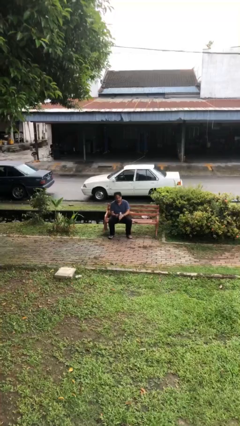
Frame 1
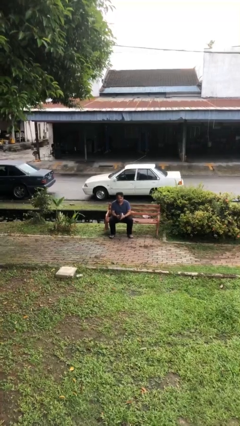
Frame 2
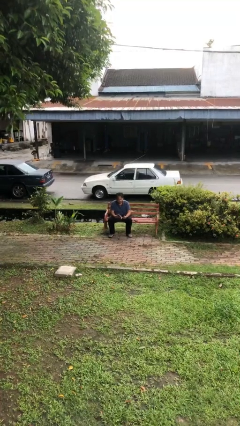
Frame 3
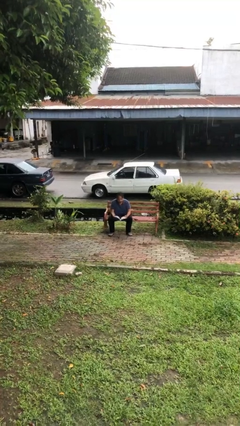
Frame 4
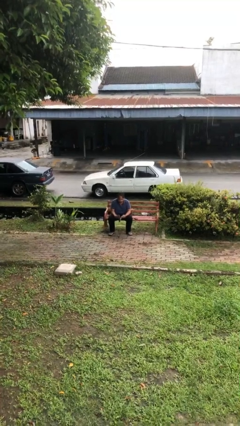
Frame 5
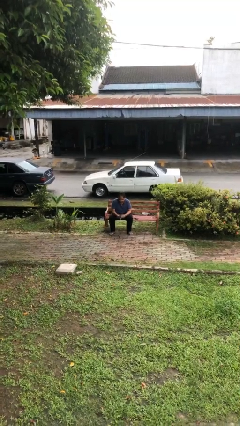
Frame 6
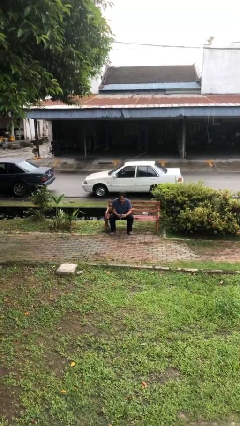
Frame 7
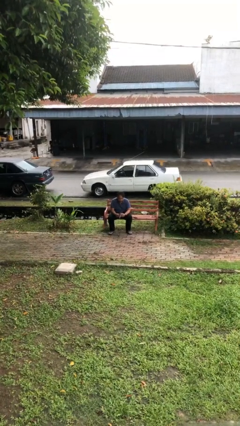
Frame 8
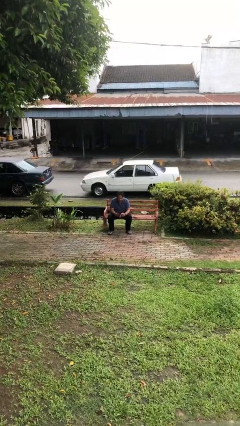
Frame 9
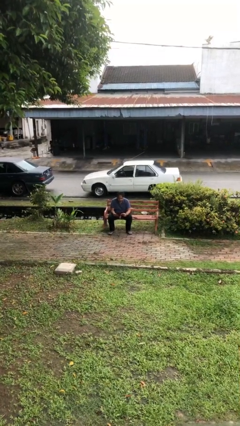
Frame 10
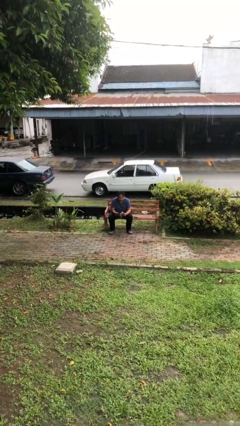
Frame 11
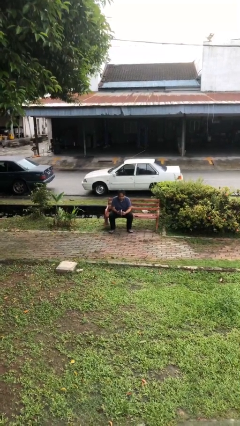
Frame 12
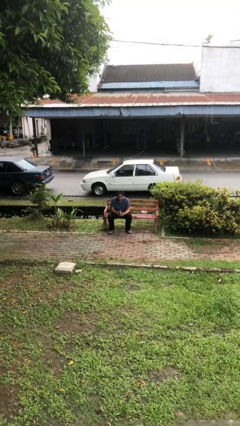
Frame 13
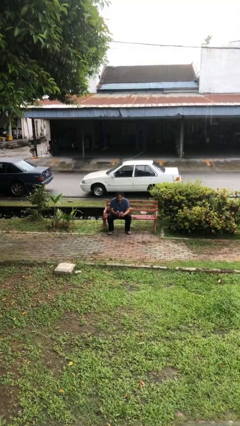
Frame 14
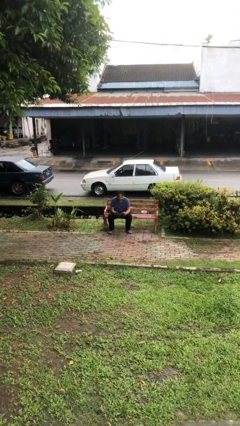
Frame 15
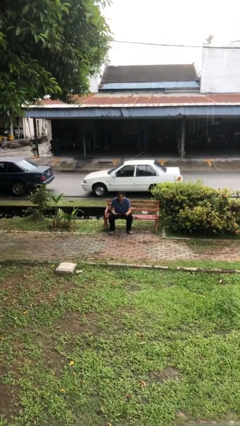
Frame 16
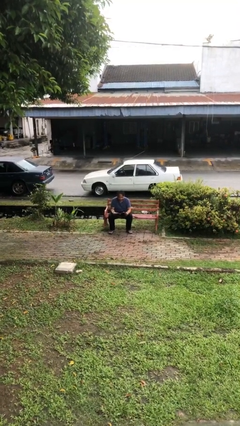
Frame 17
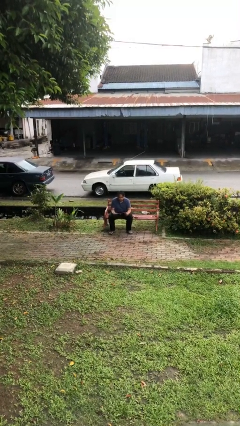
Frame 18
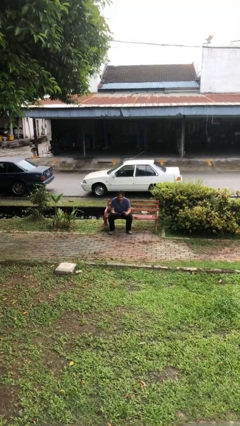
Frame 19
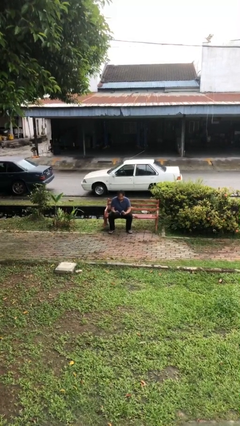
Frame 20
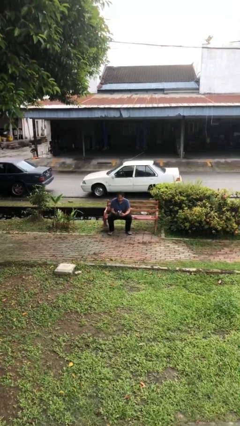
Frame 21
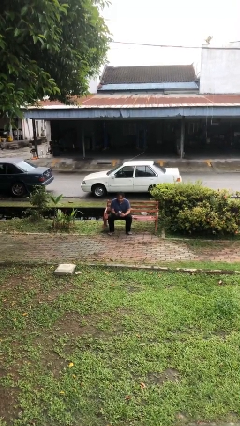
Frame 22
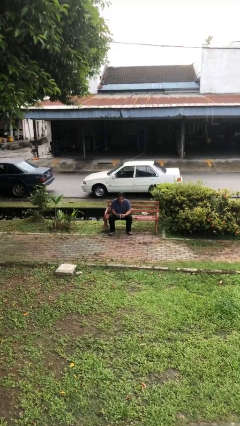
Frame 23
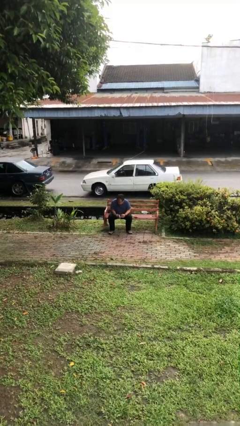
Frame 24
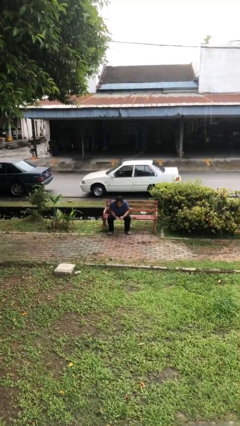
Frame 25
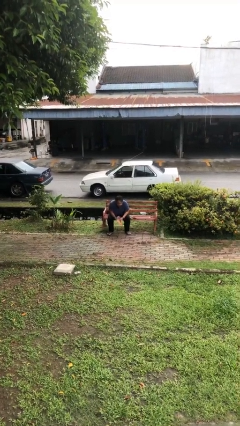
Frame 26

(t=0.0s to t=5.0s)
person reads document

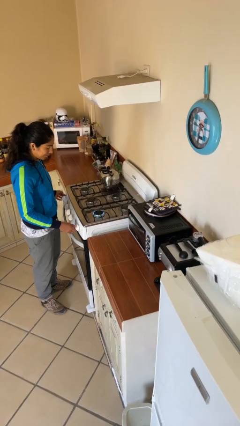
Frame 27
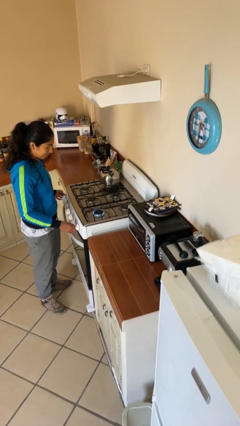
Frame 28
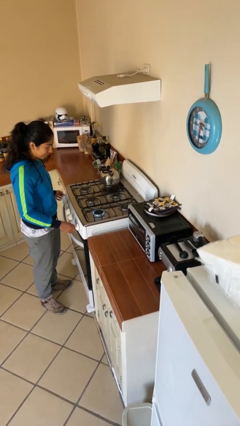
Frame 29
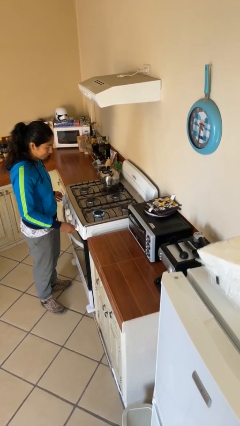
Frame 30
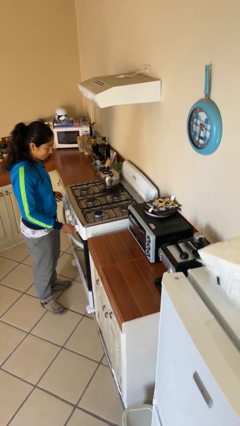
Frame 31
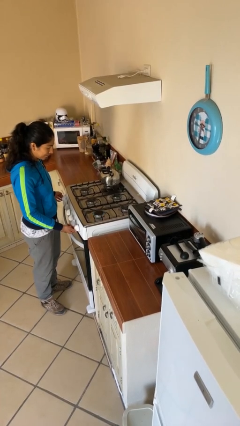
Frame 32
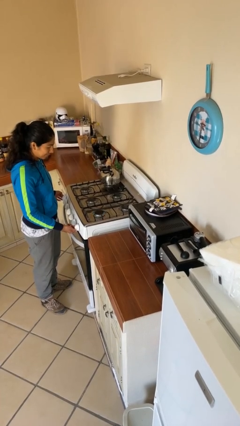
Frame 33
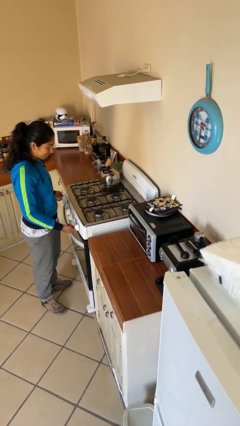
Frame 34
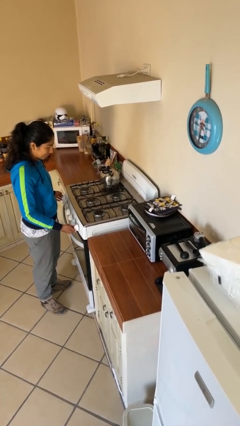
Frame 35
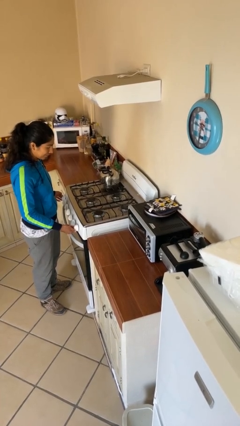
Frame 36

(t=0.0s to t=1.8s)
person turns off stovetop

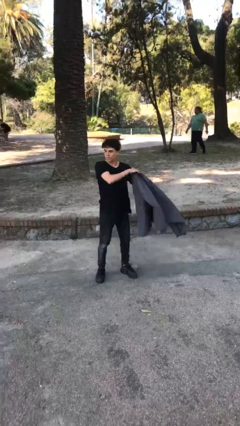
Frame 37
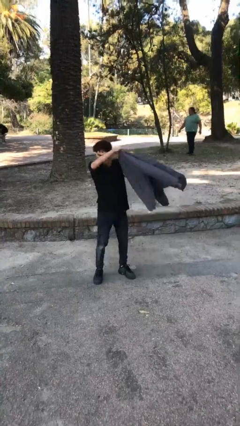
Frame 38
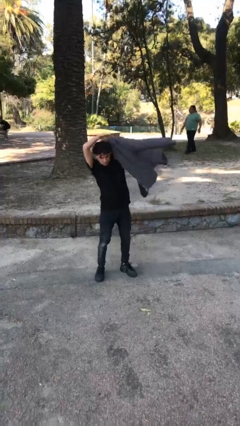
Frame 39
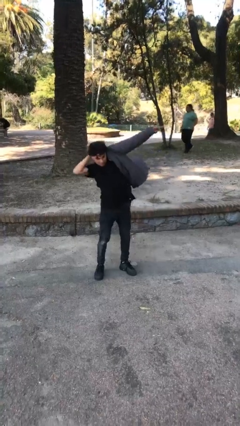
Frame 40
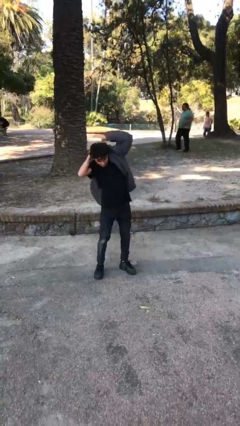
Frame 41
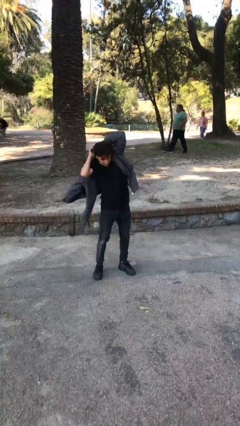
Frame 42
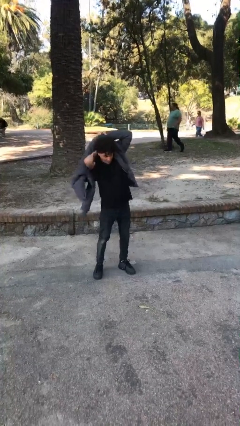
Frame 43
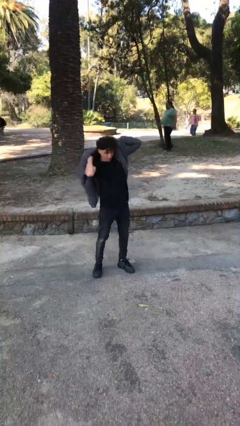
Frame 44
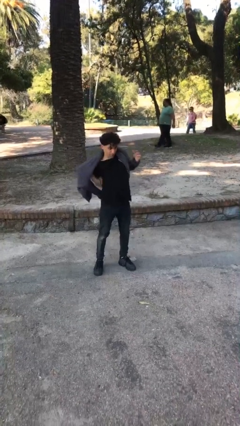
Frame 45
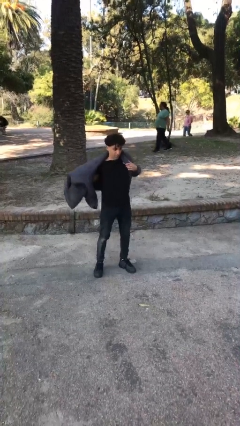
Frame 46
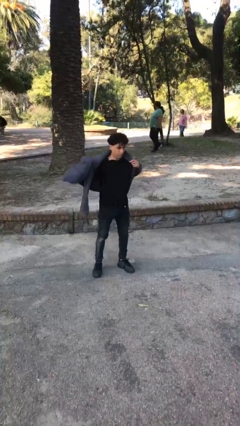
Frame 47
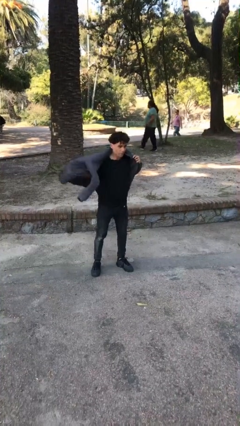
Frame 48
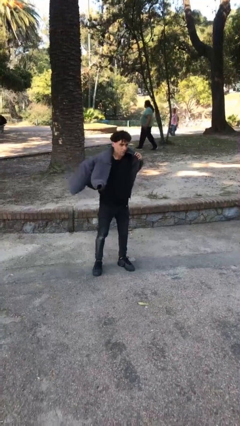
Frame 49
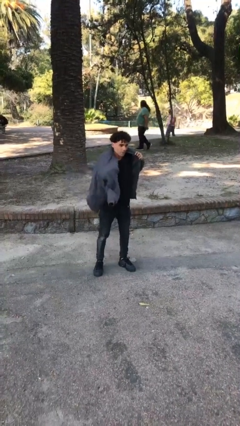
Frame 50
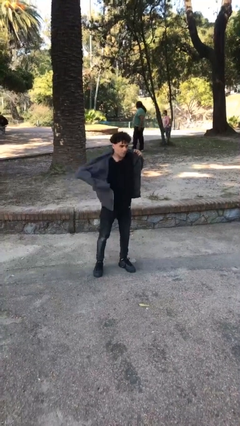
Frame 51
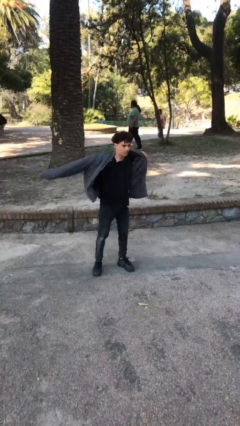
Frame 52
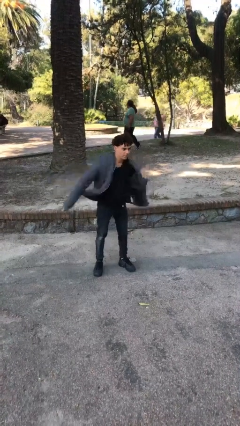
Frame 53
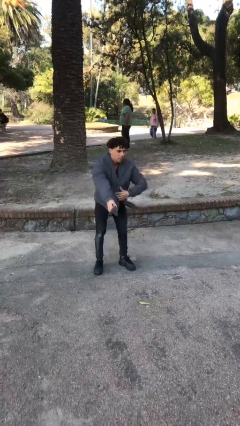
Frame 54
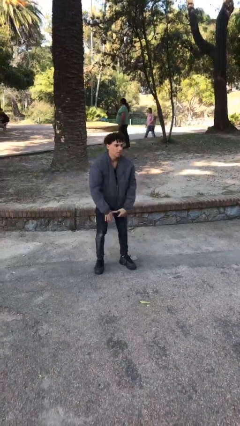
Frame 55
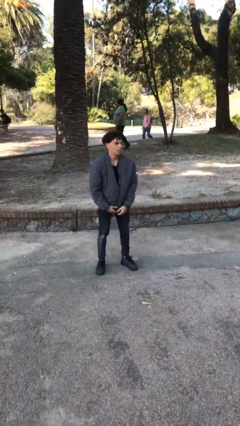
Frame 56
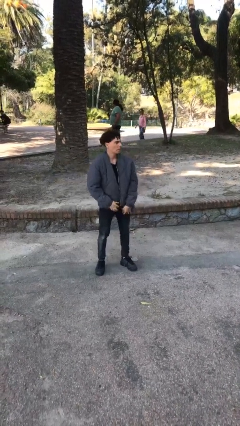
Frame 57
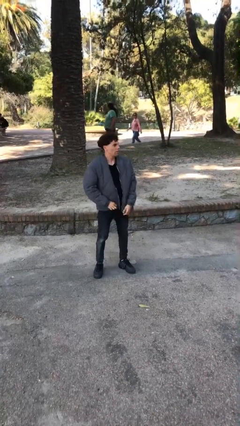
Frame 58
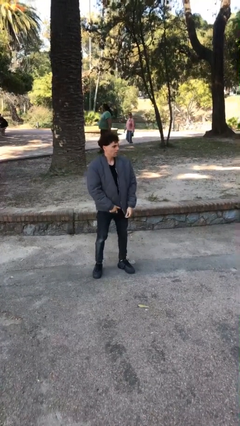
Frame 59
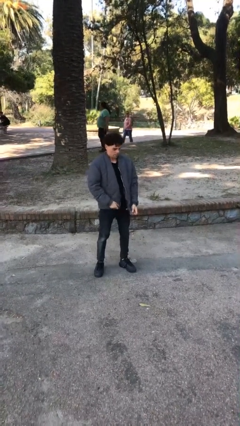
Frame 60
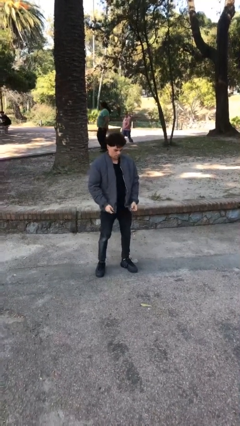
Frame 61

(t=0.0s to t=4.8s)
person puts on jacket

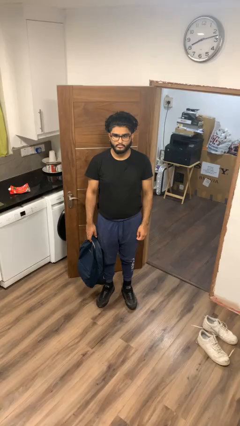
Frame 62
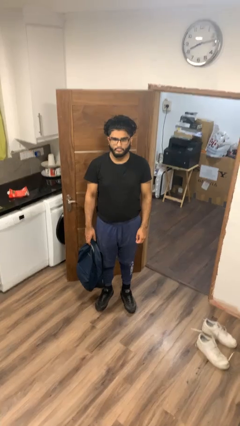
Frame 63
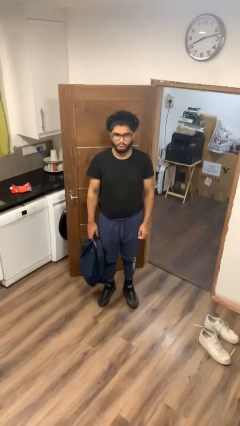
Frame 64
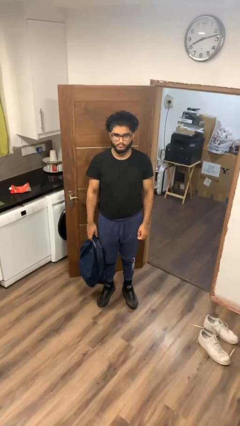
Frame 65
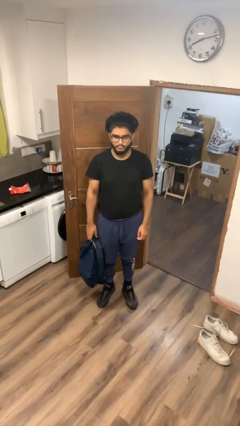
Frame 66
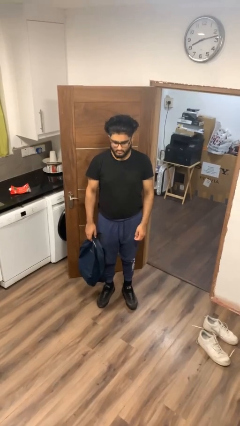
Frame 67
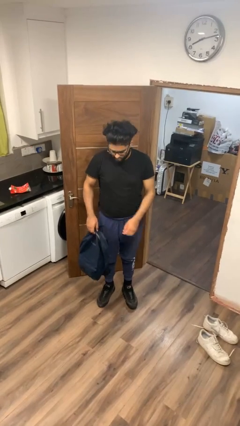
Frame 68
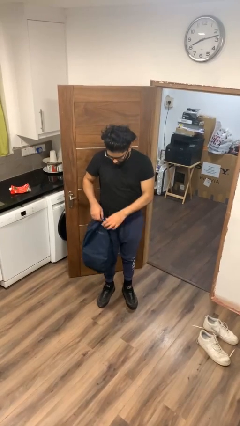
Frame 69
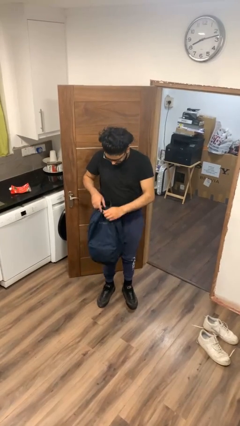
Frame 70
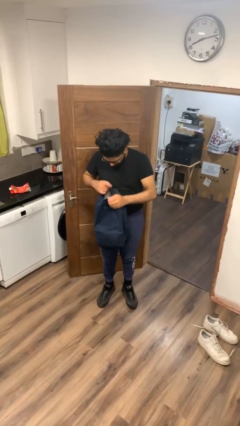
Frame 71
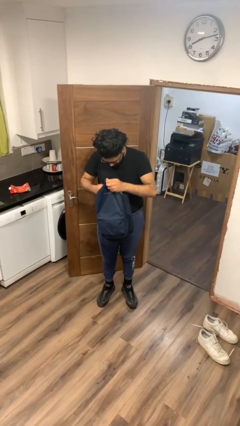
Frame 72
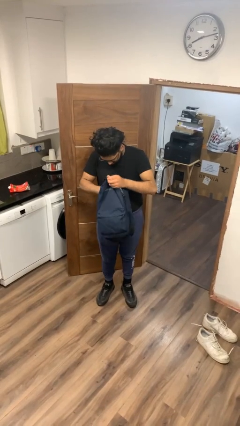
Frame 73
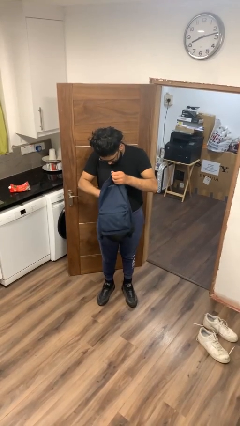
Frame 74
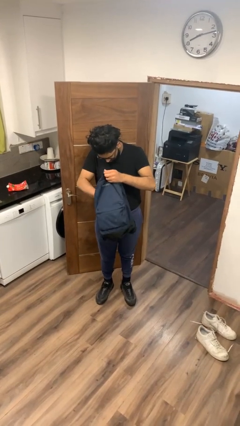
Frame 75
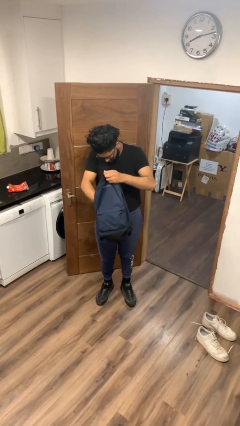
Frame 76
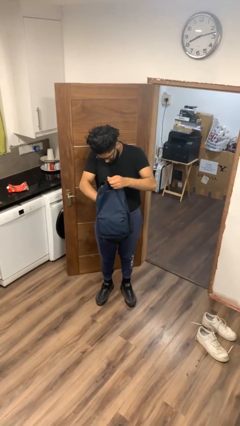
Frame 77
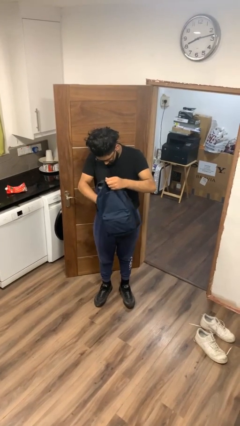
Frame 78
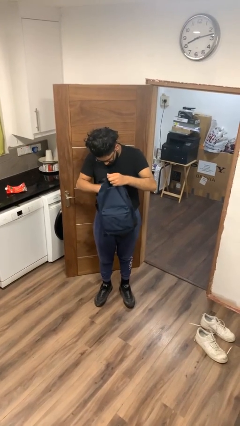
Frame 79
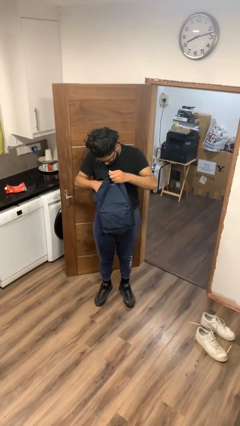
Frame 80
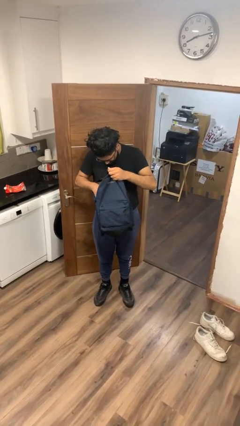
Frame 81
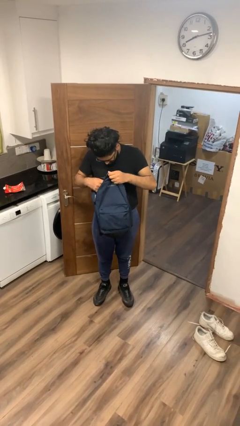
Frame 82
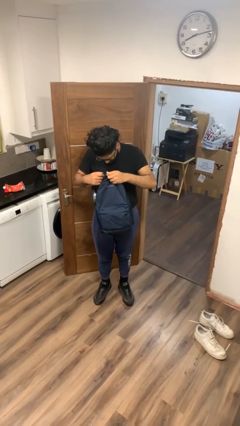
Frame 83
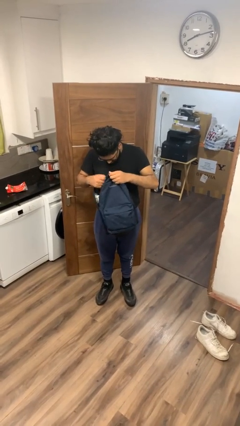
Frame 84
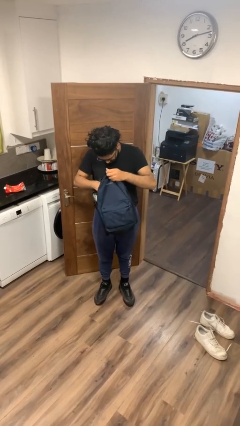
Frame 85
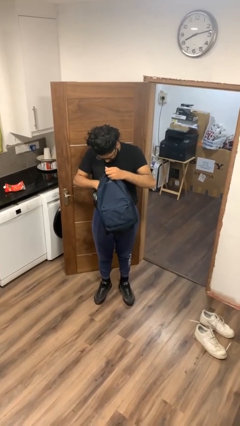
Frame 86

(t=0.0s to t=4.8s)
person searches in backpack

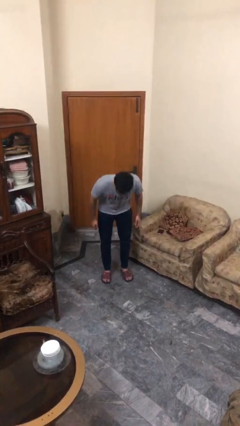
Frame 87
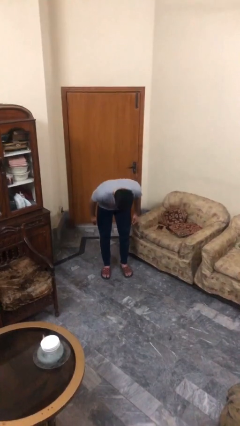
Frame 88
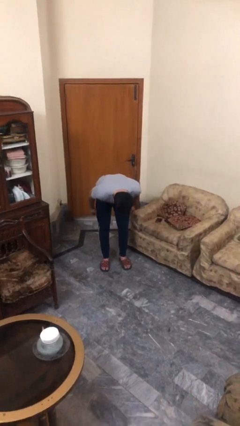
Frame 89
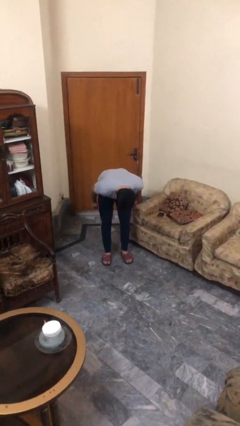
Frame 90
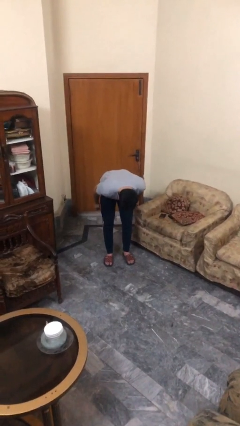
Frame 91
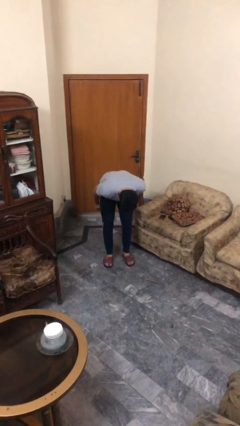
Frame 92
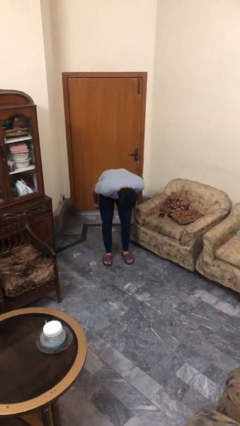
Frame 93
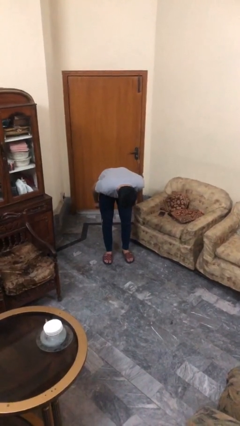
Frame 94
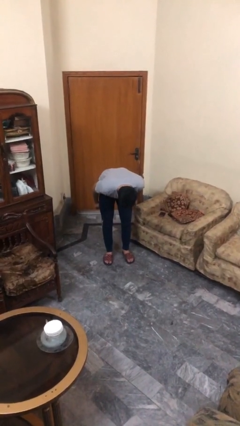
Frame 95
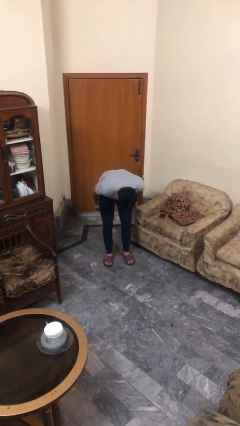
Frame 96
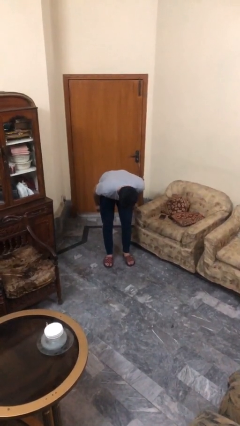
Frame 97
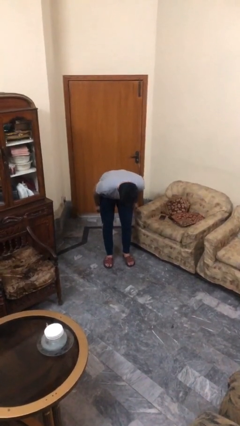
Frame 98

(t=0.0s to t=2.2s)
person bows
